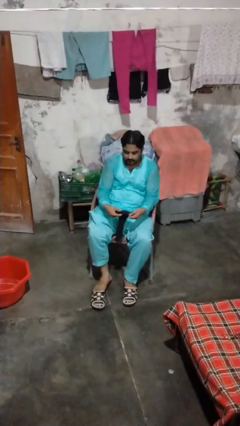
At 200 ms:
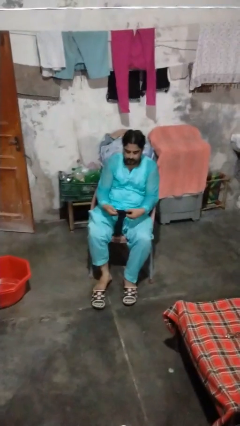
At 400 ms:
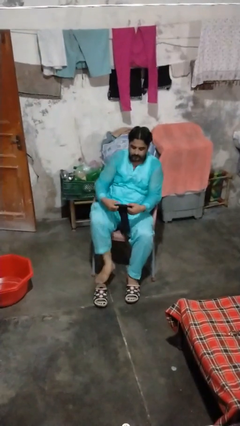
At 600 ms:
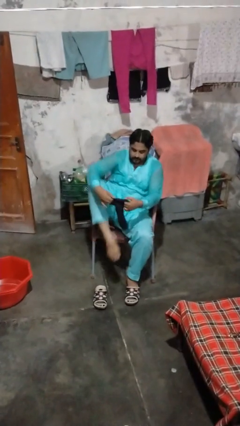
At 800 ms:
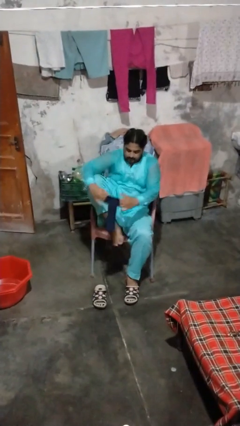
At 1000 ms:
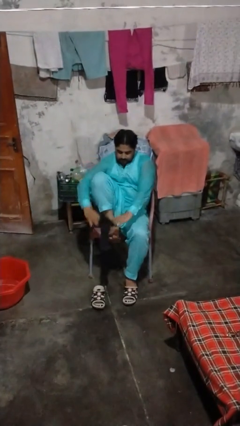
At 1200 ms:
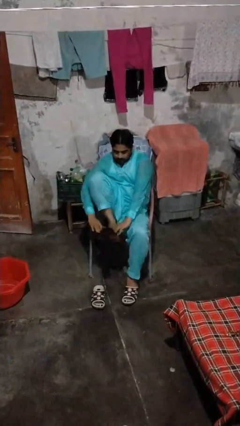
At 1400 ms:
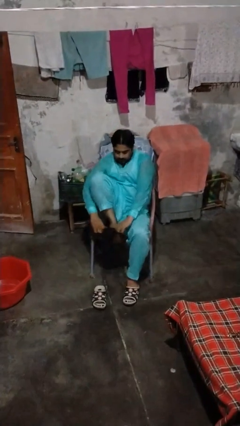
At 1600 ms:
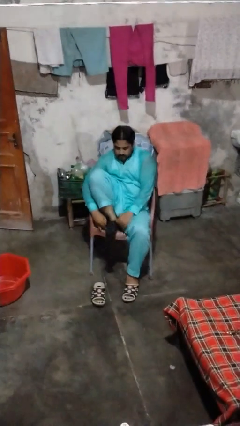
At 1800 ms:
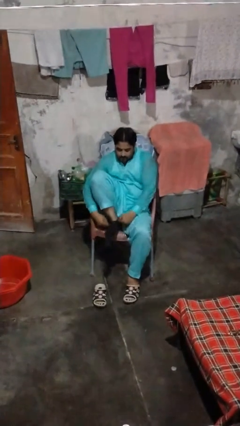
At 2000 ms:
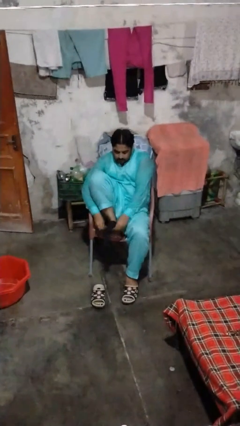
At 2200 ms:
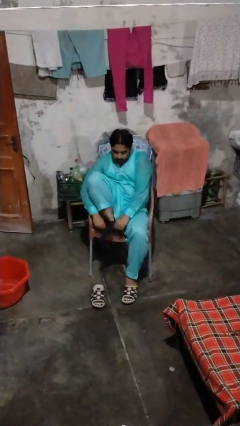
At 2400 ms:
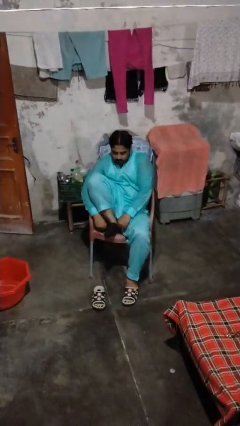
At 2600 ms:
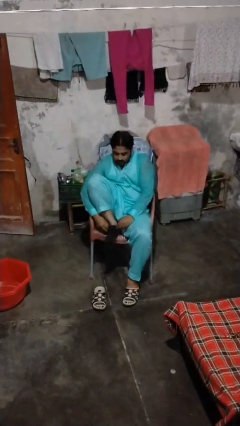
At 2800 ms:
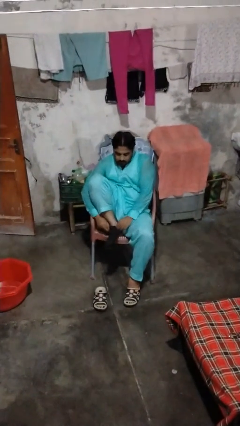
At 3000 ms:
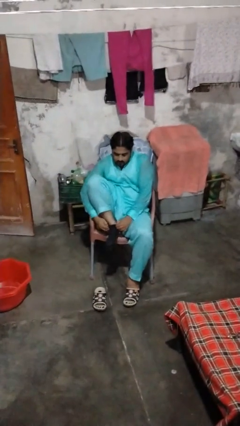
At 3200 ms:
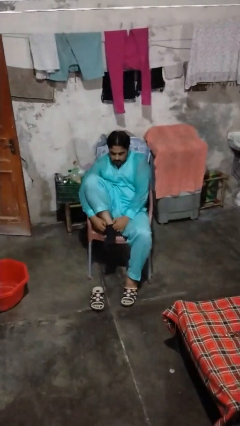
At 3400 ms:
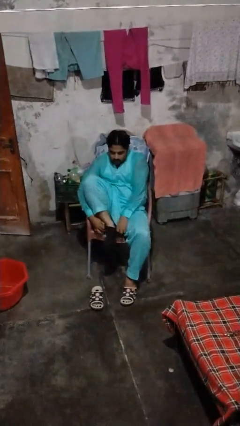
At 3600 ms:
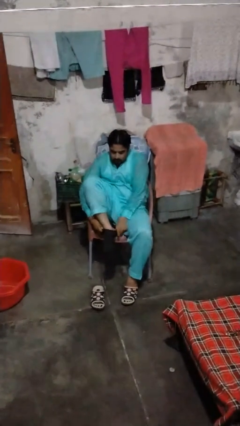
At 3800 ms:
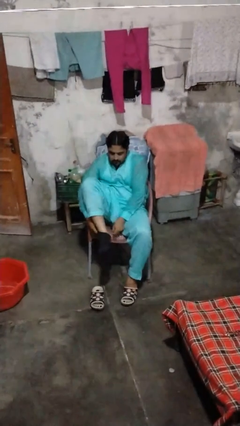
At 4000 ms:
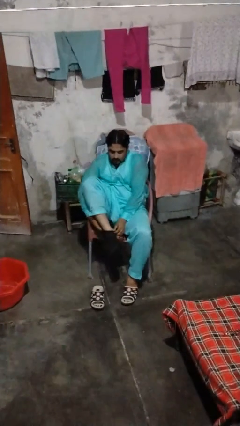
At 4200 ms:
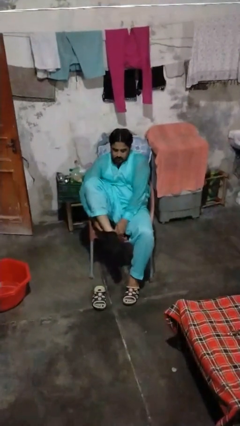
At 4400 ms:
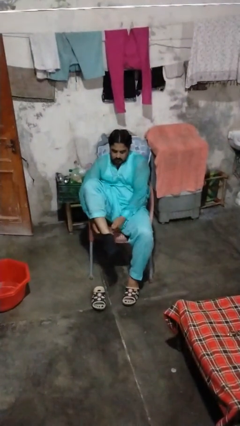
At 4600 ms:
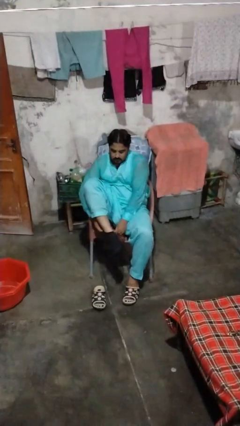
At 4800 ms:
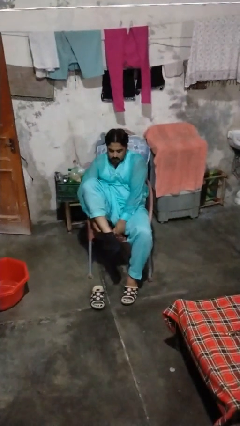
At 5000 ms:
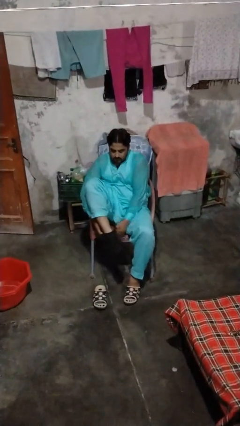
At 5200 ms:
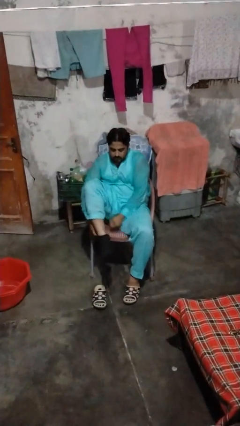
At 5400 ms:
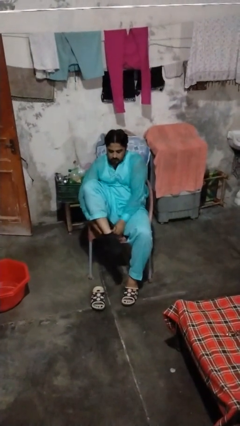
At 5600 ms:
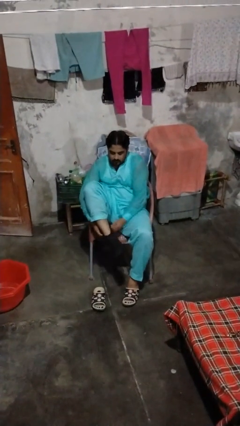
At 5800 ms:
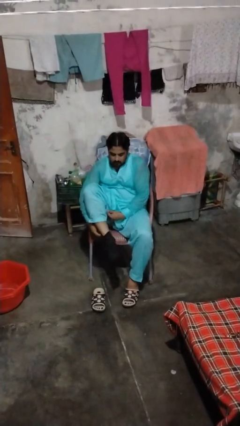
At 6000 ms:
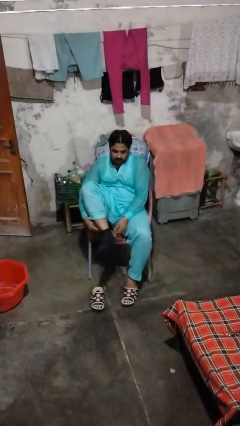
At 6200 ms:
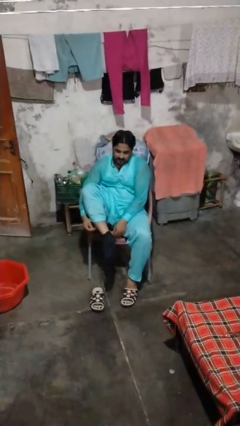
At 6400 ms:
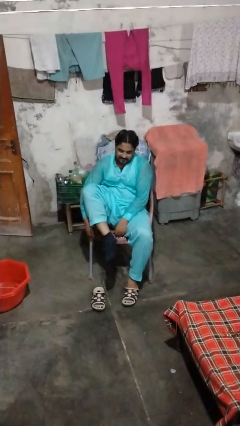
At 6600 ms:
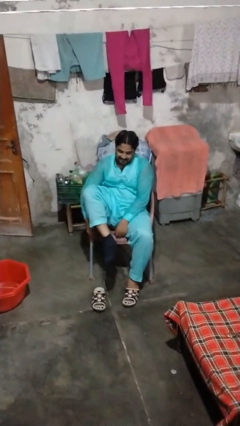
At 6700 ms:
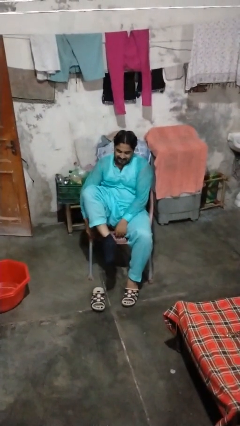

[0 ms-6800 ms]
person puts on socks

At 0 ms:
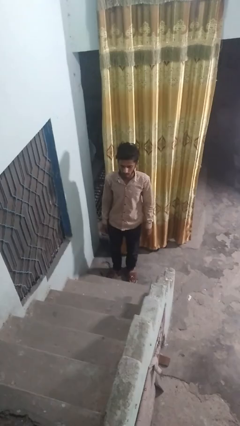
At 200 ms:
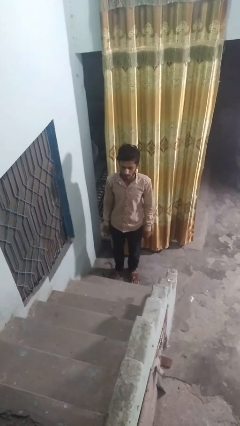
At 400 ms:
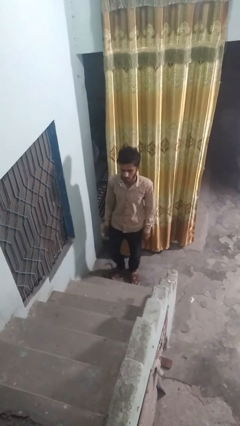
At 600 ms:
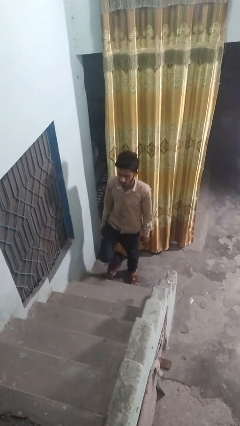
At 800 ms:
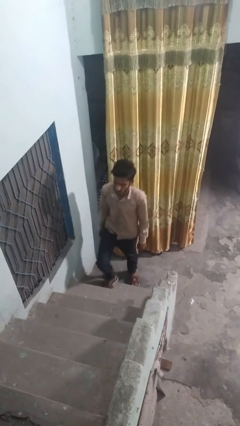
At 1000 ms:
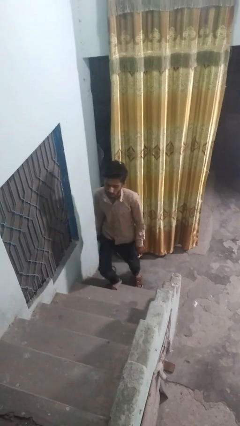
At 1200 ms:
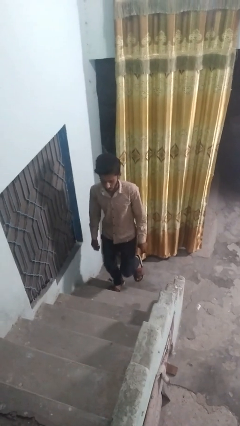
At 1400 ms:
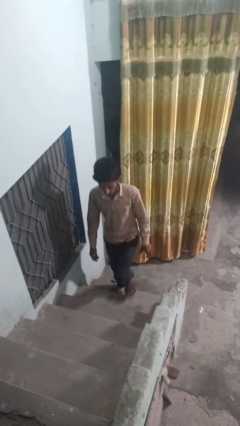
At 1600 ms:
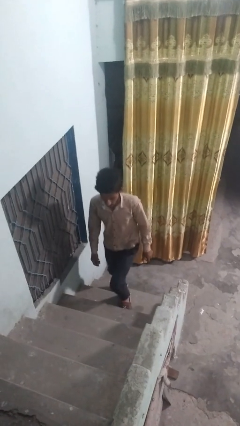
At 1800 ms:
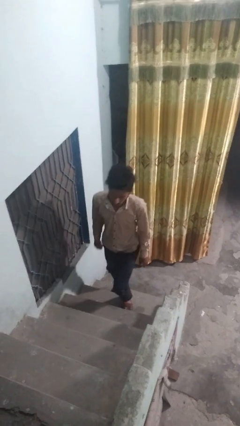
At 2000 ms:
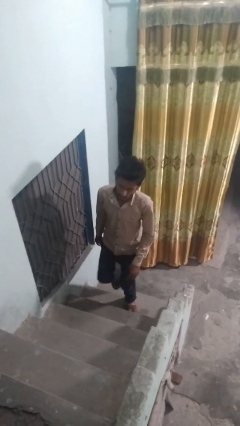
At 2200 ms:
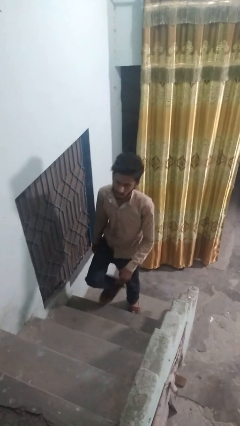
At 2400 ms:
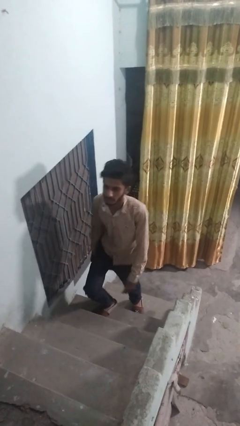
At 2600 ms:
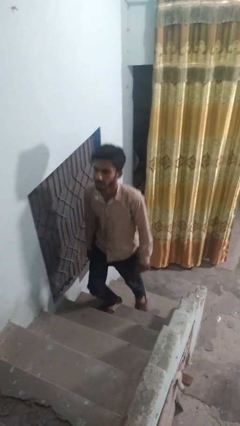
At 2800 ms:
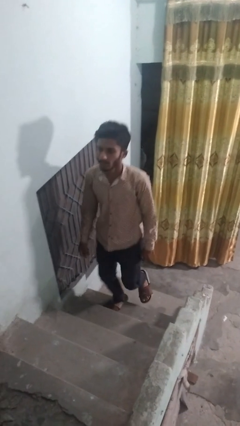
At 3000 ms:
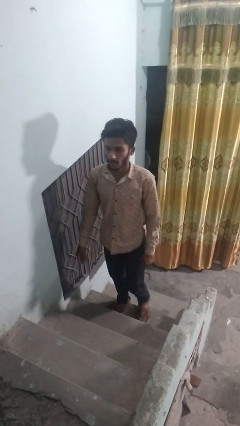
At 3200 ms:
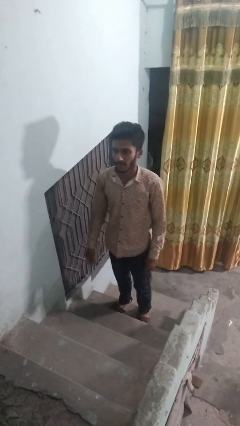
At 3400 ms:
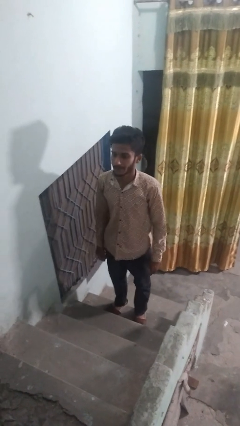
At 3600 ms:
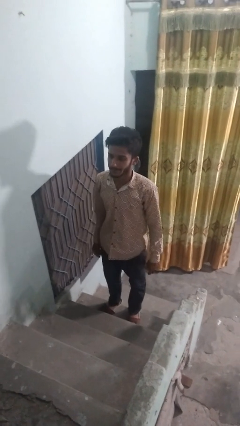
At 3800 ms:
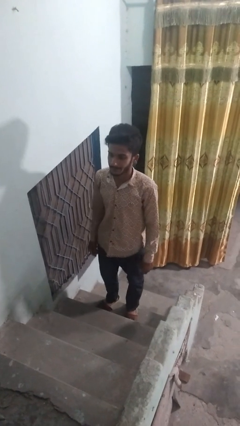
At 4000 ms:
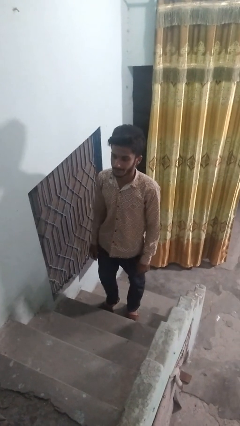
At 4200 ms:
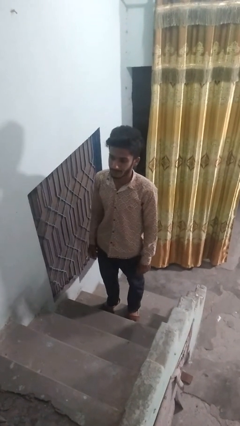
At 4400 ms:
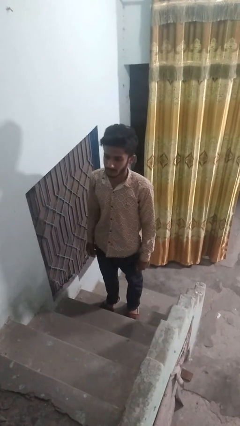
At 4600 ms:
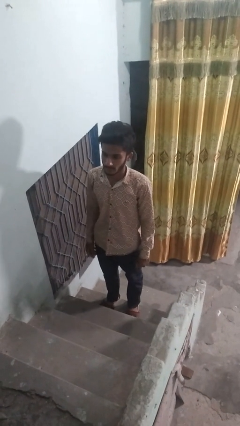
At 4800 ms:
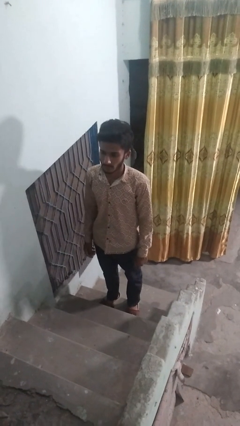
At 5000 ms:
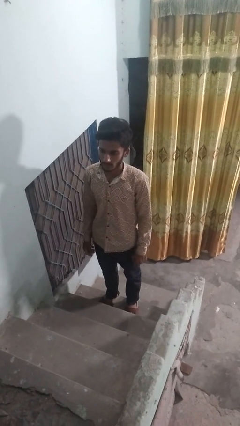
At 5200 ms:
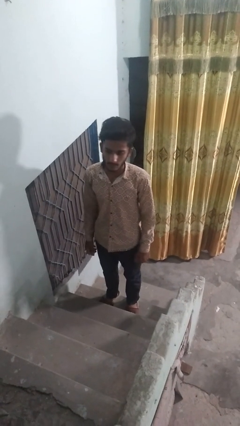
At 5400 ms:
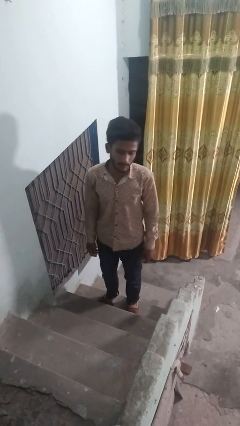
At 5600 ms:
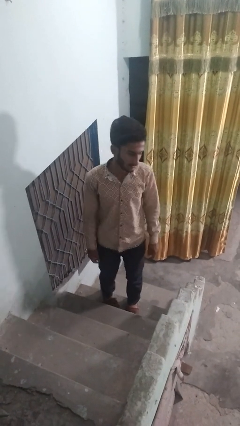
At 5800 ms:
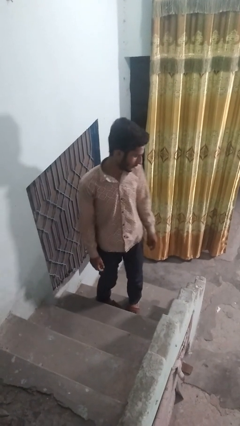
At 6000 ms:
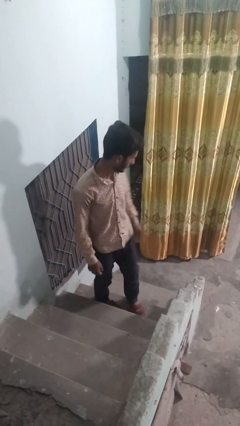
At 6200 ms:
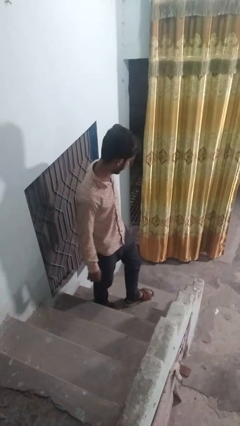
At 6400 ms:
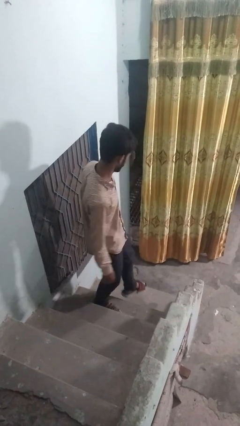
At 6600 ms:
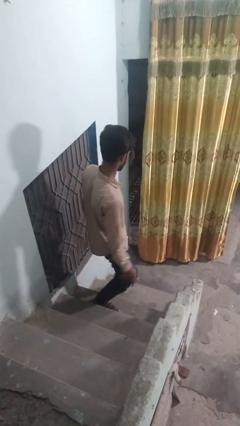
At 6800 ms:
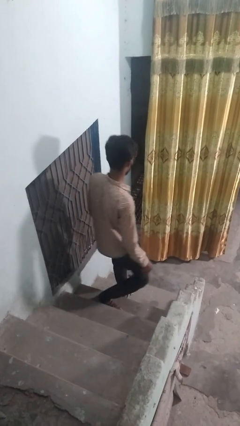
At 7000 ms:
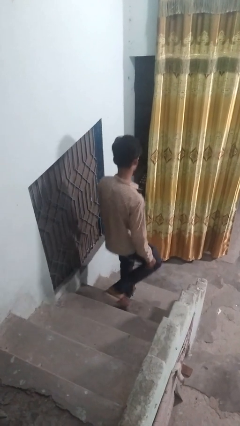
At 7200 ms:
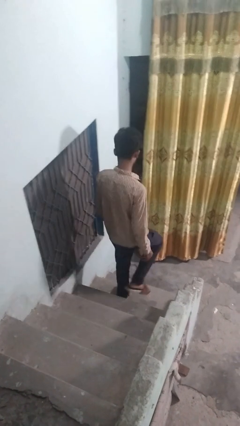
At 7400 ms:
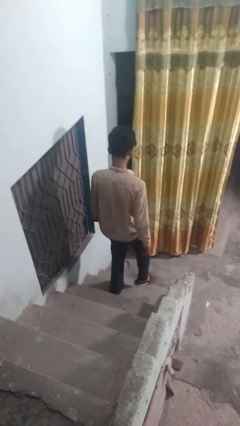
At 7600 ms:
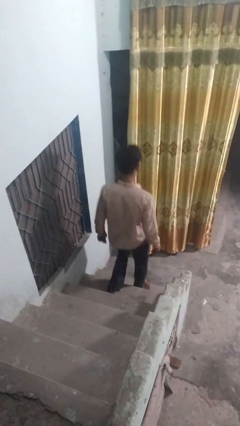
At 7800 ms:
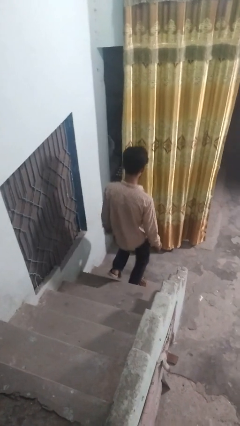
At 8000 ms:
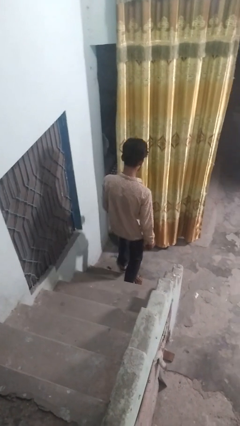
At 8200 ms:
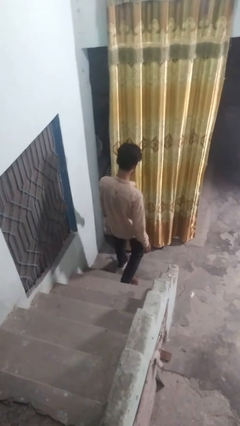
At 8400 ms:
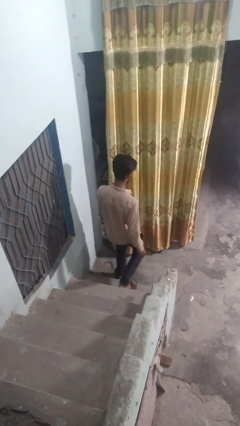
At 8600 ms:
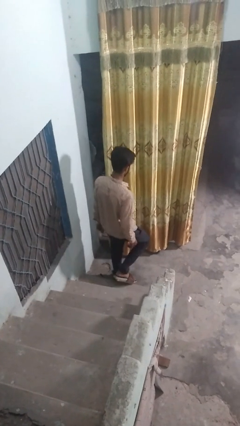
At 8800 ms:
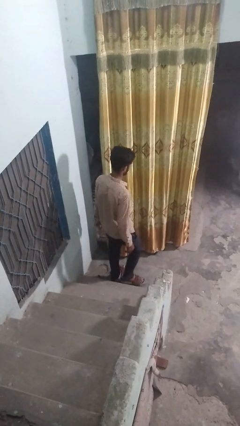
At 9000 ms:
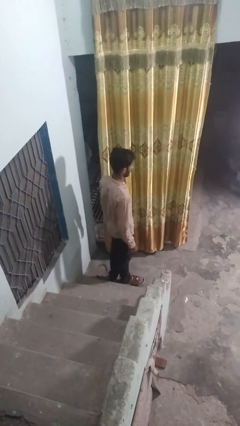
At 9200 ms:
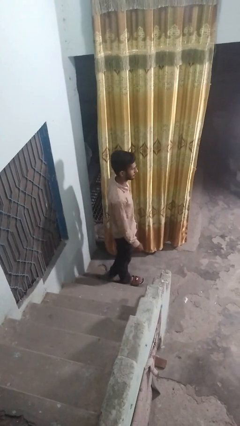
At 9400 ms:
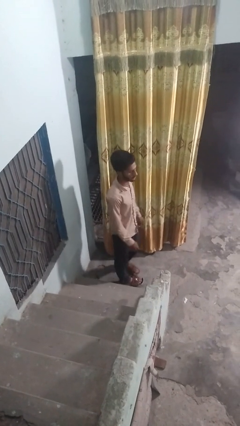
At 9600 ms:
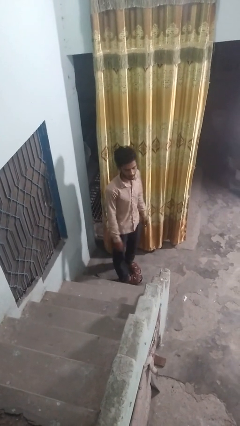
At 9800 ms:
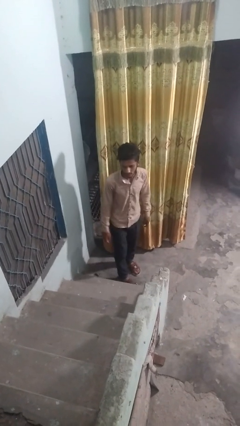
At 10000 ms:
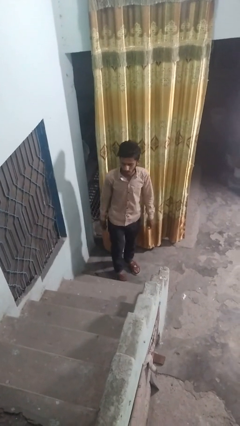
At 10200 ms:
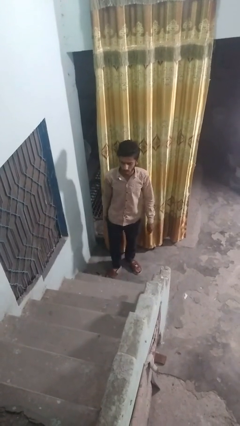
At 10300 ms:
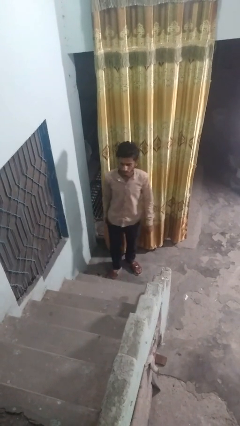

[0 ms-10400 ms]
person climbs up stairs

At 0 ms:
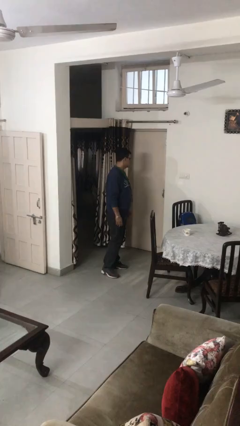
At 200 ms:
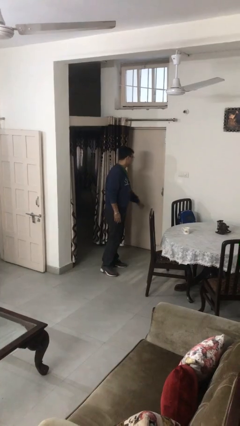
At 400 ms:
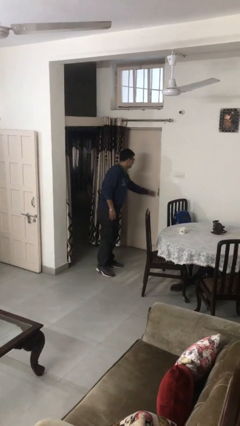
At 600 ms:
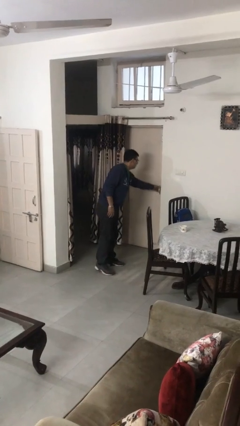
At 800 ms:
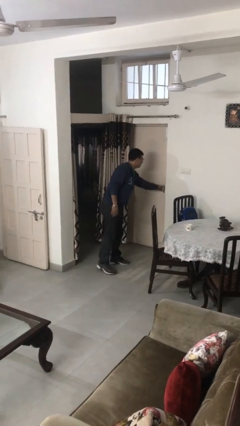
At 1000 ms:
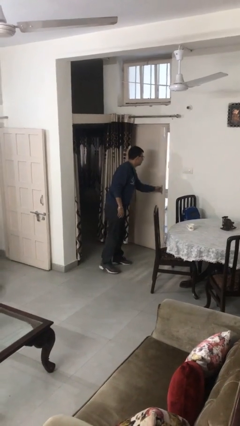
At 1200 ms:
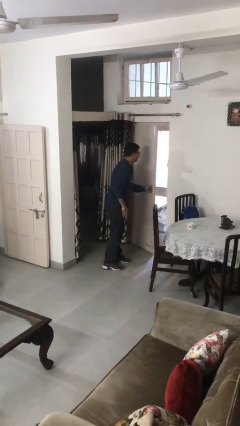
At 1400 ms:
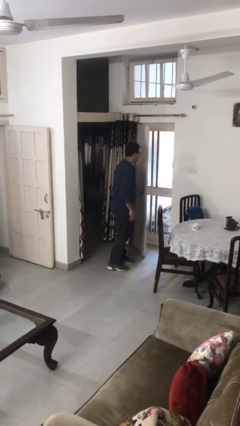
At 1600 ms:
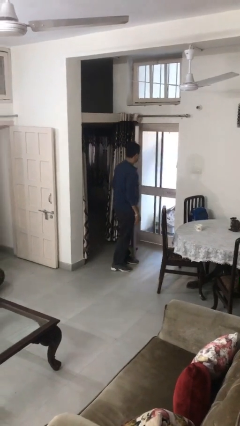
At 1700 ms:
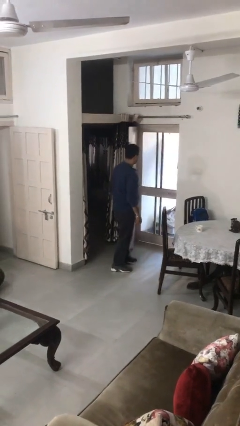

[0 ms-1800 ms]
person opens facility door
